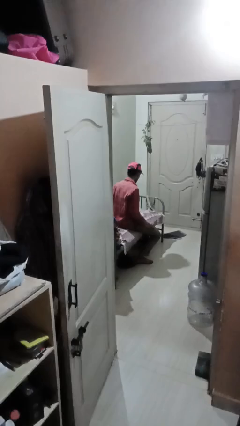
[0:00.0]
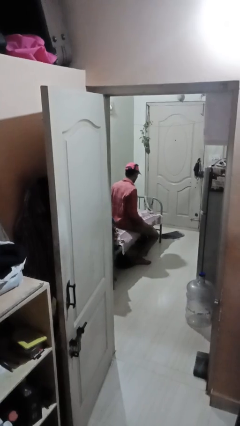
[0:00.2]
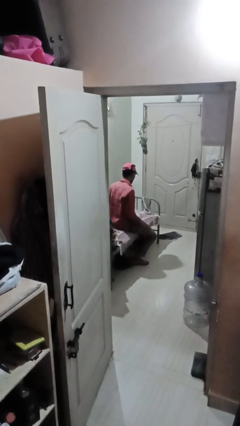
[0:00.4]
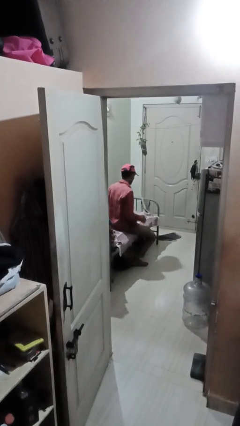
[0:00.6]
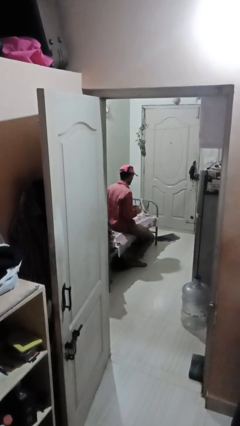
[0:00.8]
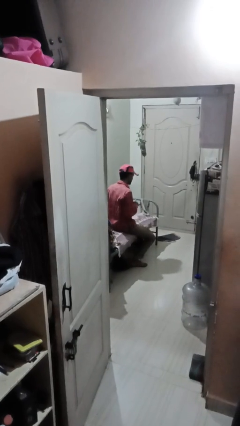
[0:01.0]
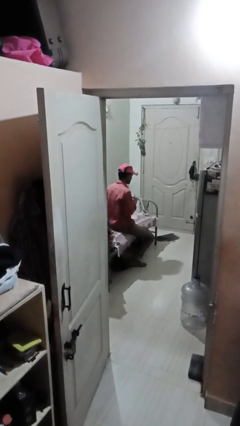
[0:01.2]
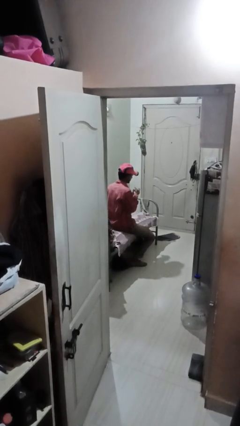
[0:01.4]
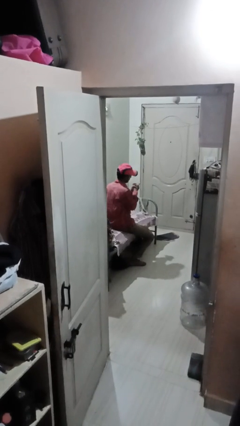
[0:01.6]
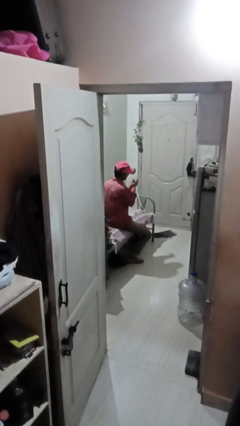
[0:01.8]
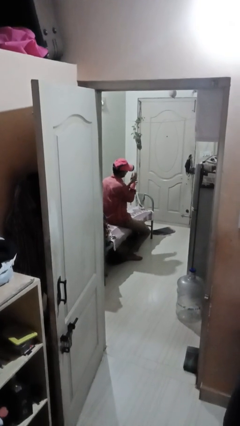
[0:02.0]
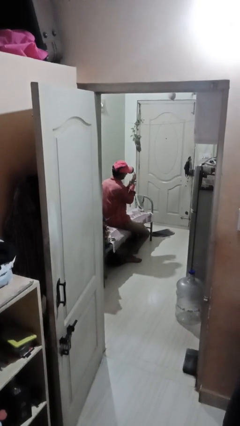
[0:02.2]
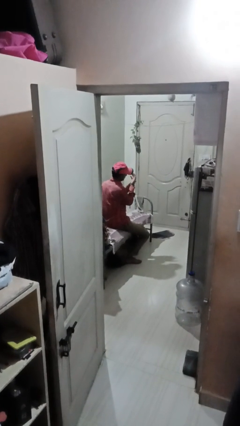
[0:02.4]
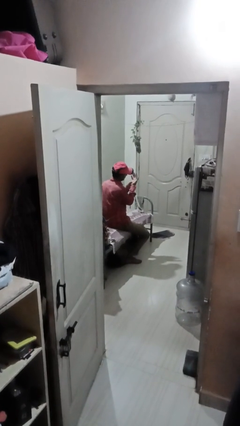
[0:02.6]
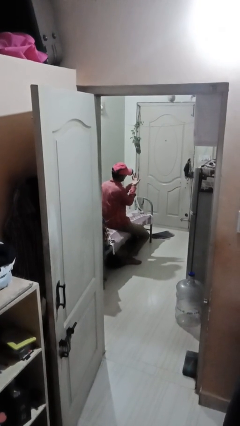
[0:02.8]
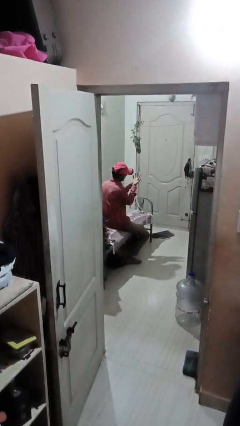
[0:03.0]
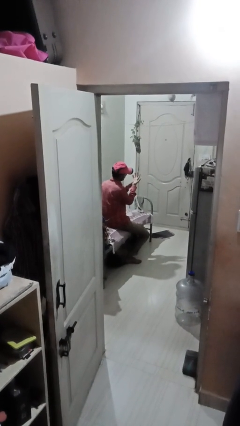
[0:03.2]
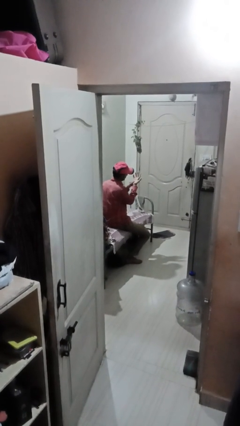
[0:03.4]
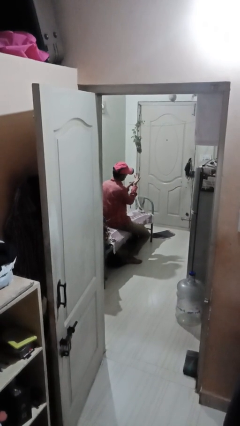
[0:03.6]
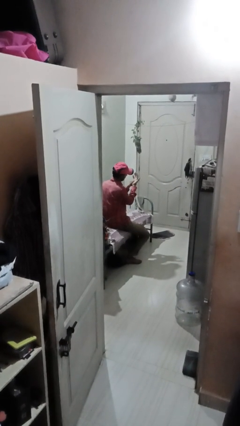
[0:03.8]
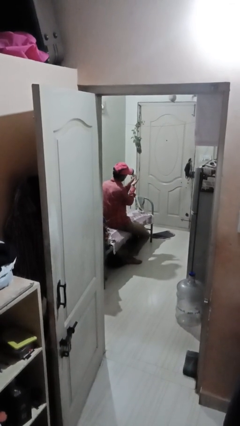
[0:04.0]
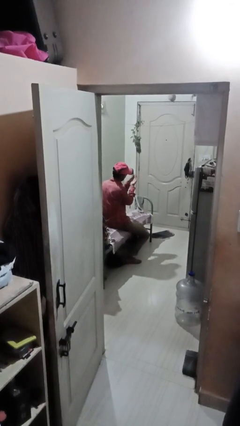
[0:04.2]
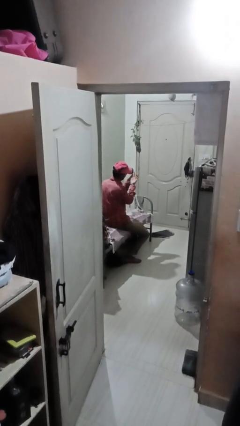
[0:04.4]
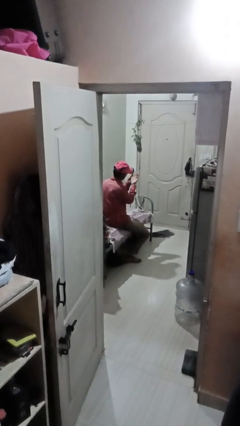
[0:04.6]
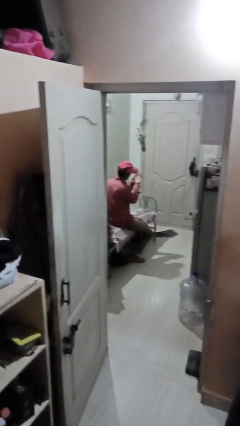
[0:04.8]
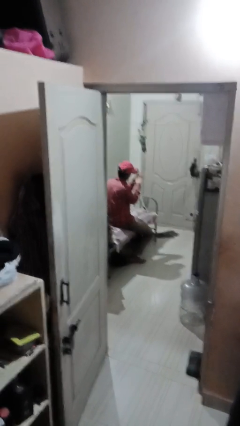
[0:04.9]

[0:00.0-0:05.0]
person looks at hands in lap

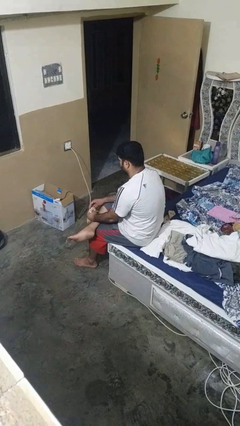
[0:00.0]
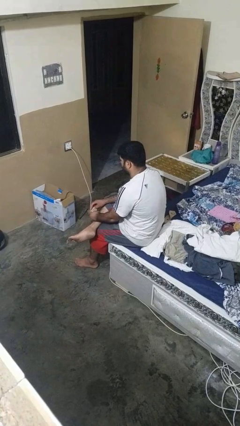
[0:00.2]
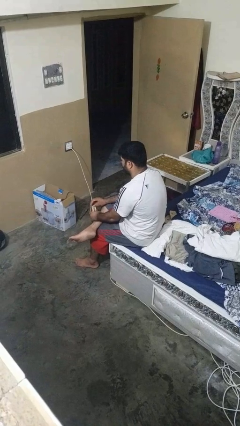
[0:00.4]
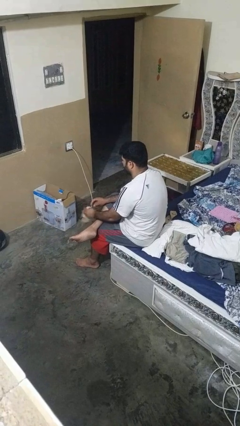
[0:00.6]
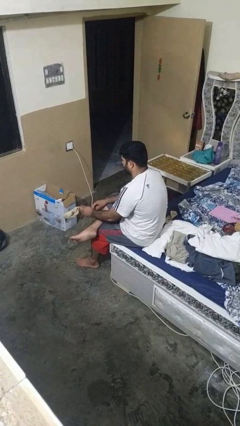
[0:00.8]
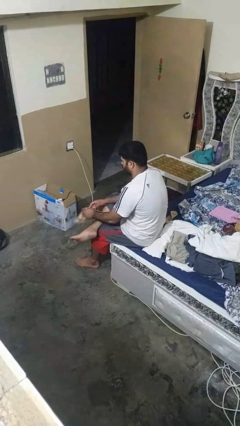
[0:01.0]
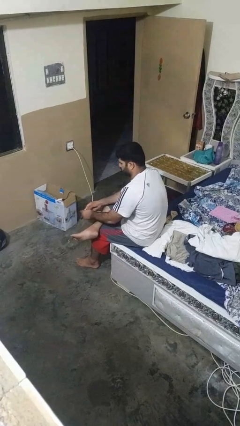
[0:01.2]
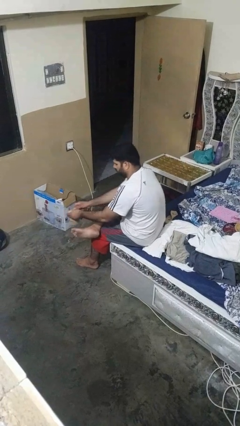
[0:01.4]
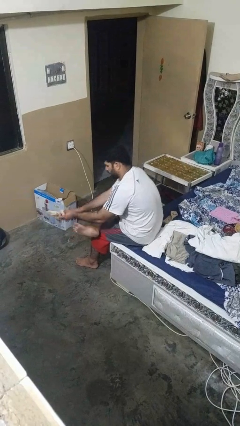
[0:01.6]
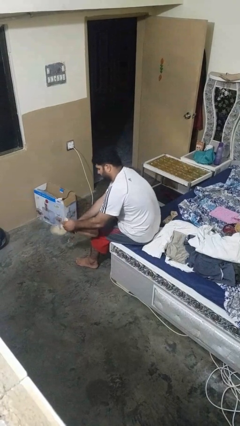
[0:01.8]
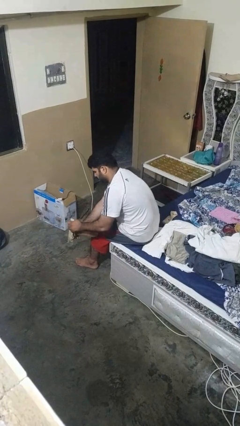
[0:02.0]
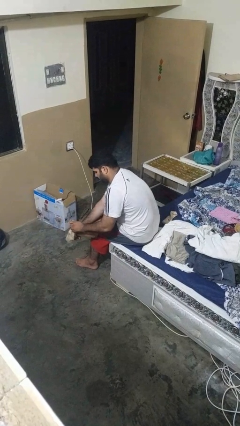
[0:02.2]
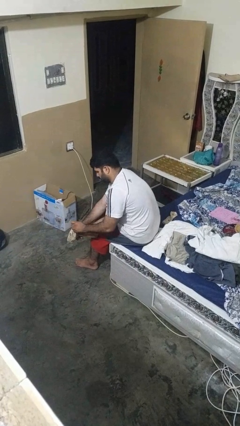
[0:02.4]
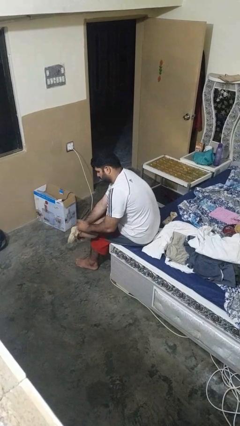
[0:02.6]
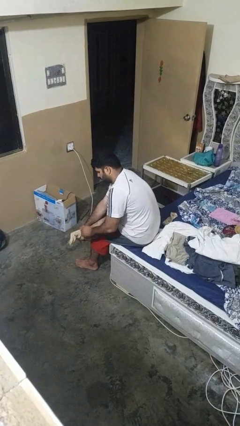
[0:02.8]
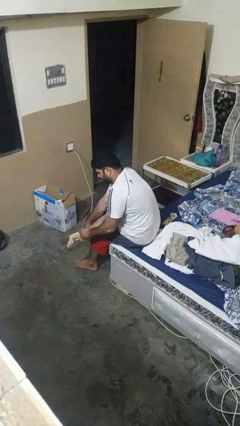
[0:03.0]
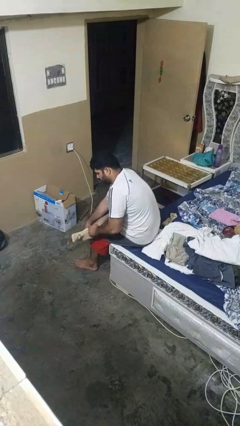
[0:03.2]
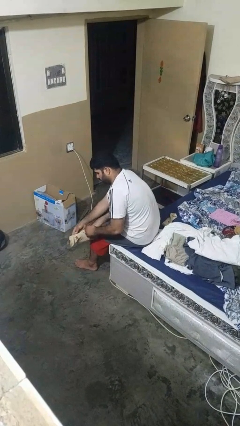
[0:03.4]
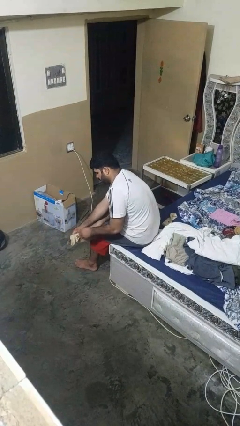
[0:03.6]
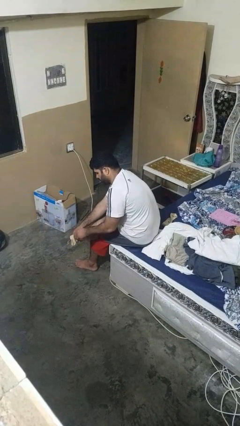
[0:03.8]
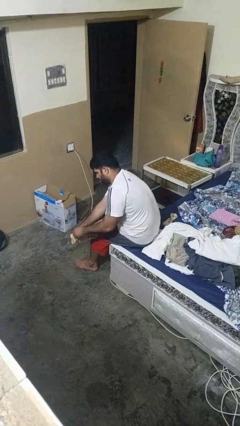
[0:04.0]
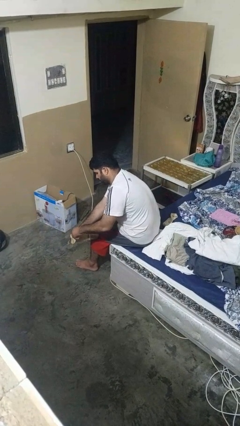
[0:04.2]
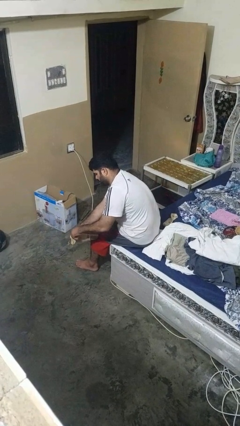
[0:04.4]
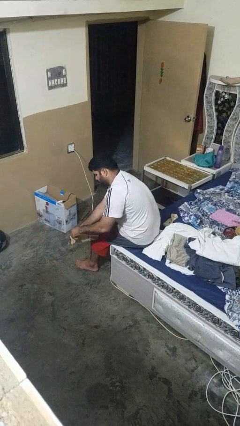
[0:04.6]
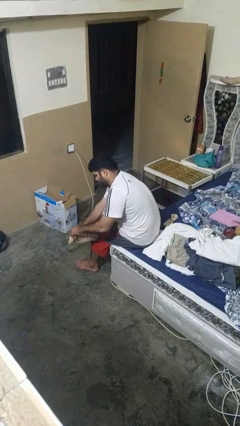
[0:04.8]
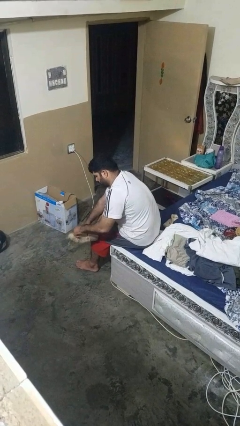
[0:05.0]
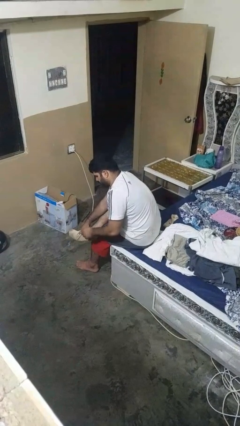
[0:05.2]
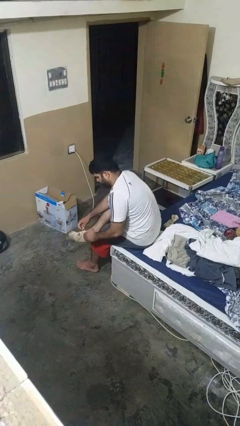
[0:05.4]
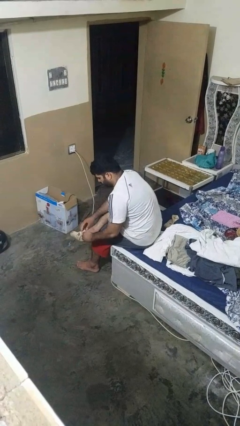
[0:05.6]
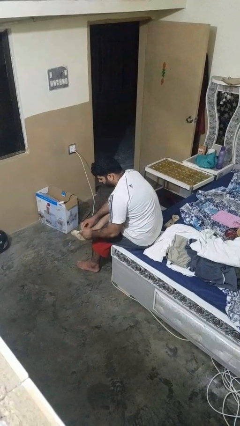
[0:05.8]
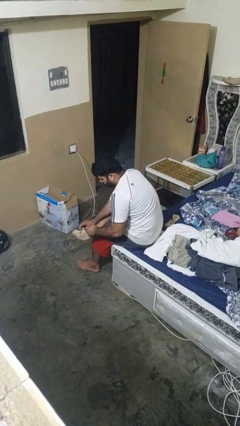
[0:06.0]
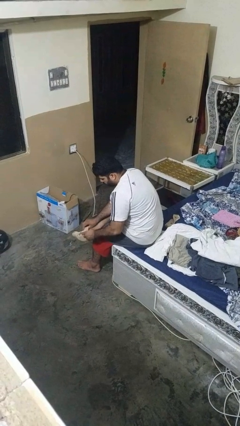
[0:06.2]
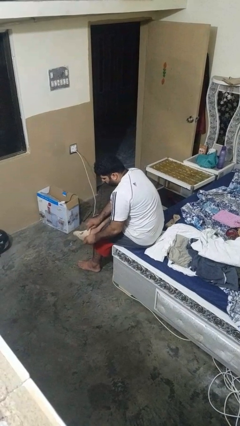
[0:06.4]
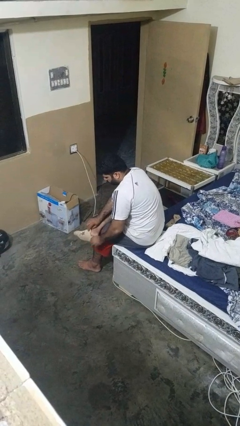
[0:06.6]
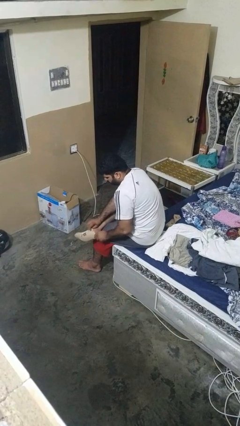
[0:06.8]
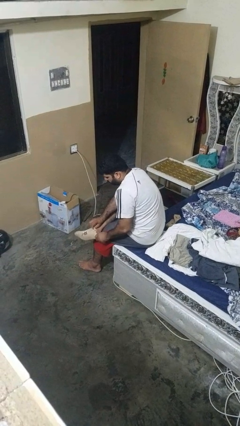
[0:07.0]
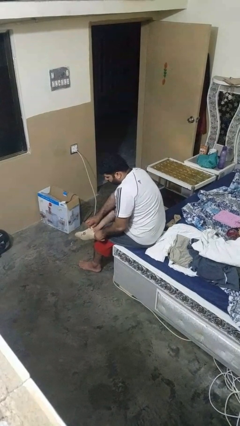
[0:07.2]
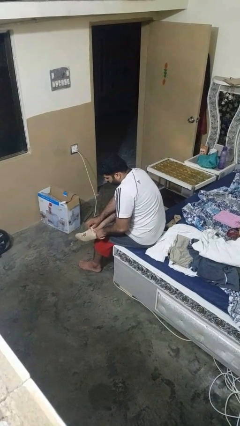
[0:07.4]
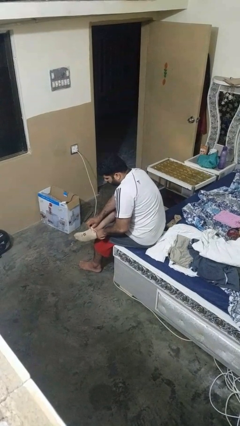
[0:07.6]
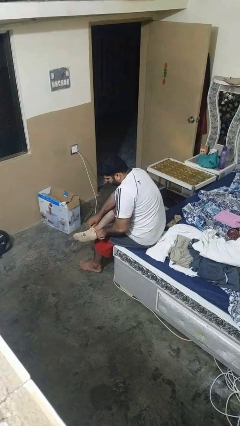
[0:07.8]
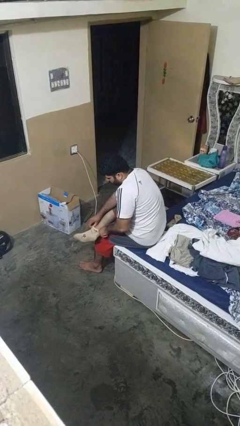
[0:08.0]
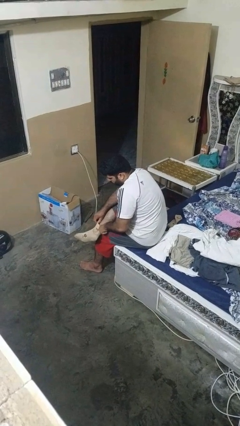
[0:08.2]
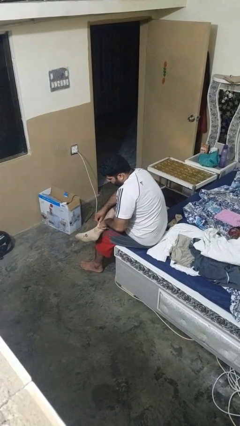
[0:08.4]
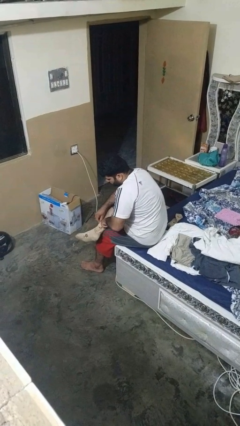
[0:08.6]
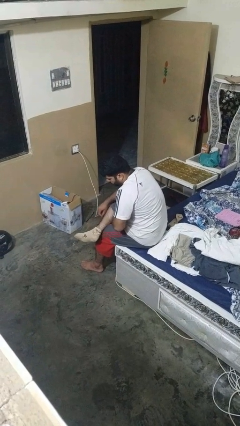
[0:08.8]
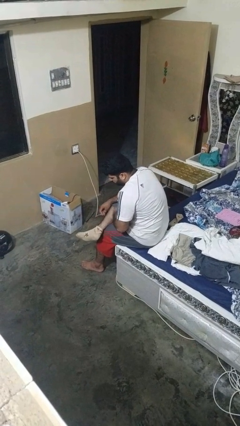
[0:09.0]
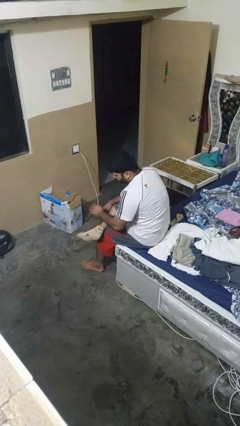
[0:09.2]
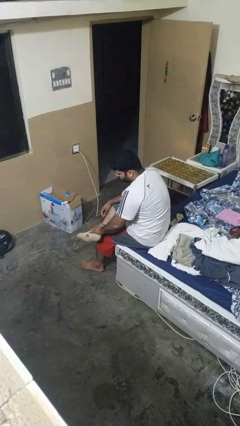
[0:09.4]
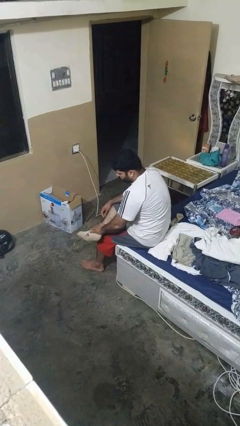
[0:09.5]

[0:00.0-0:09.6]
person puts on socks

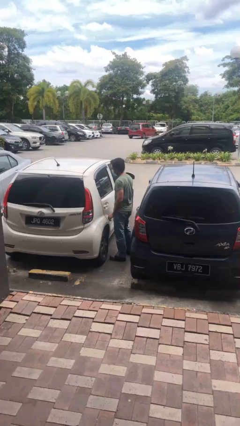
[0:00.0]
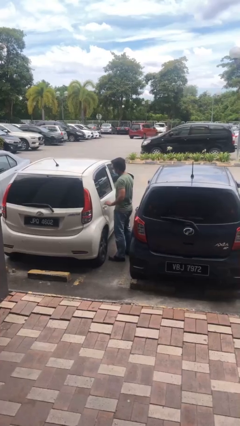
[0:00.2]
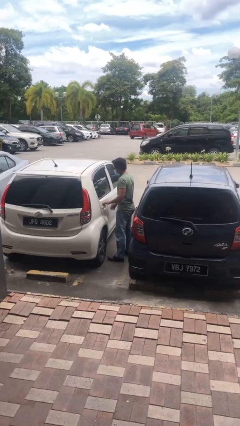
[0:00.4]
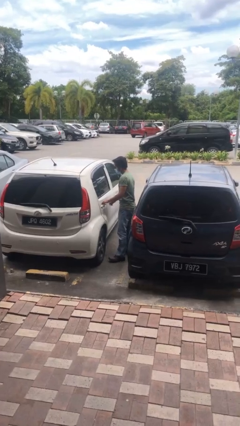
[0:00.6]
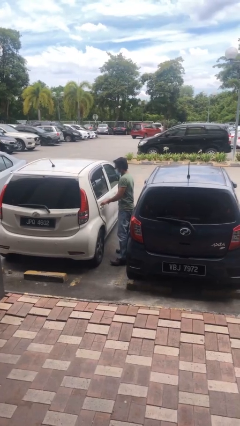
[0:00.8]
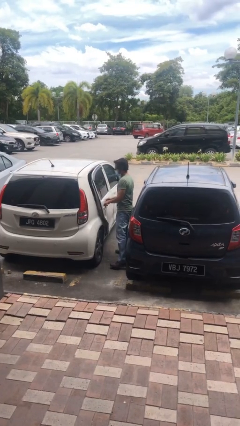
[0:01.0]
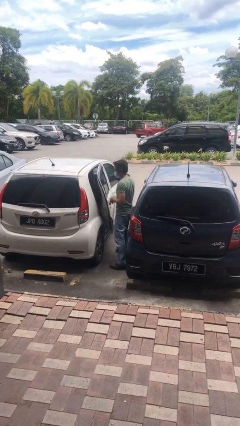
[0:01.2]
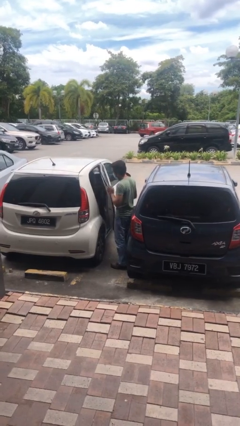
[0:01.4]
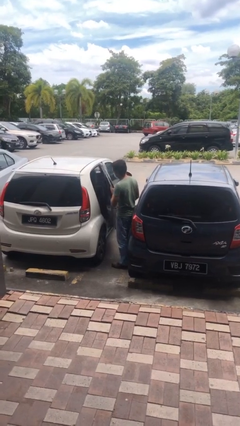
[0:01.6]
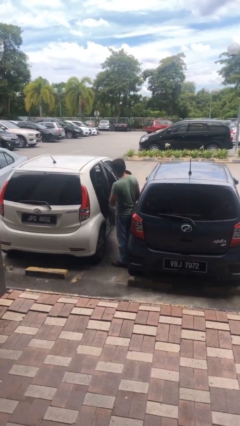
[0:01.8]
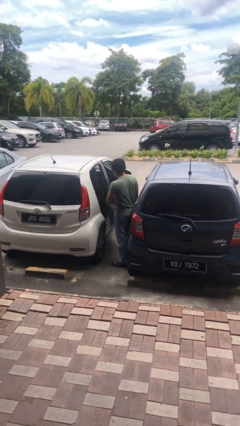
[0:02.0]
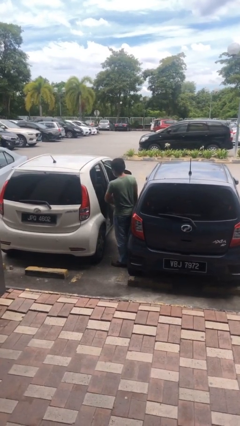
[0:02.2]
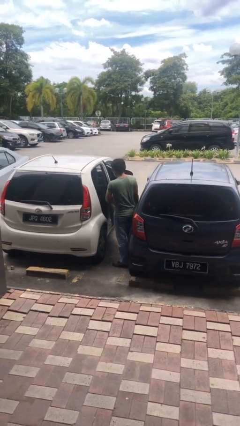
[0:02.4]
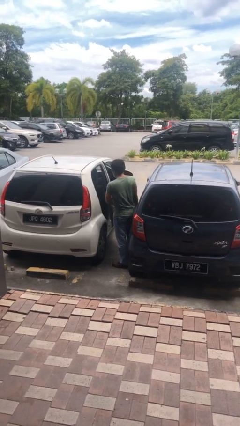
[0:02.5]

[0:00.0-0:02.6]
person opens car door

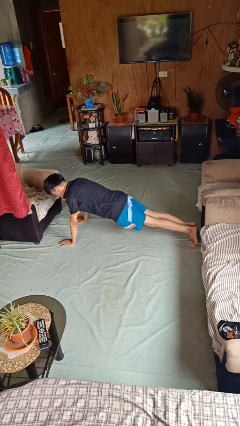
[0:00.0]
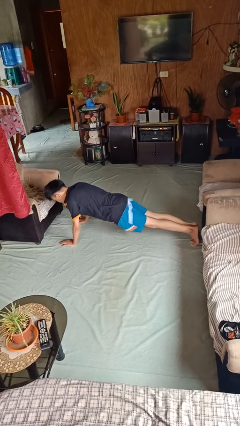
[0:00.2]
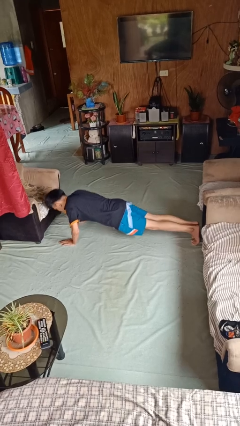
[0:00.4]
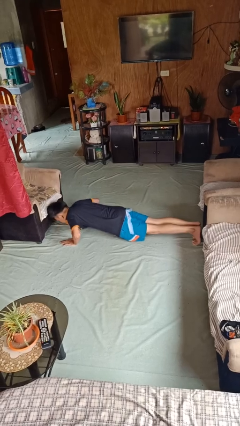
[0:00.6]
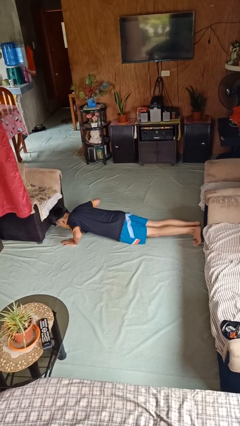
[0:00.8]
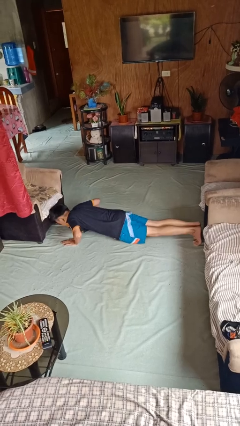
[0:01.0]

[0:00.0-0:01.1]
person exercises with pushup
